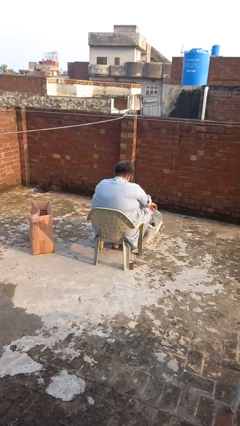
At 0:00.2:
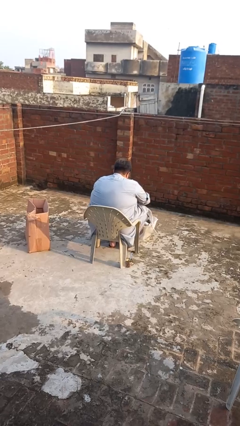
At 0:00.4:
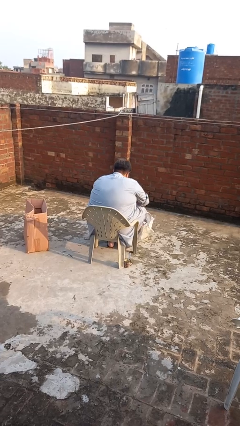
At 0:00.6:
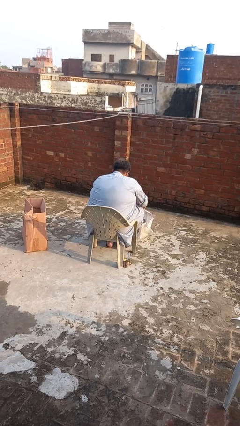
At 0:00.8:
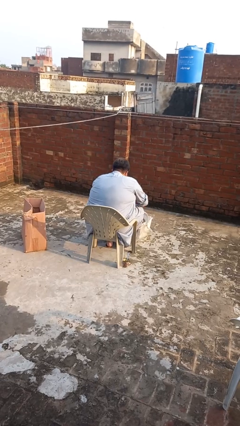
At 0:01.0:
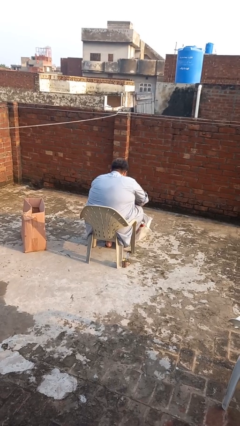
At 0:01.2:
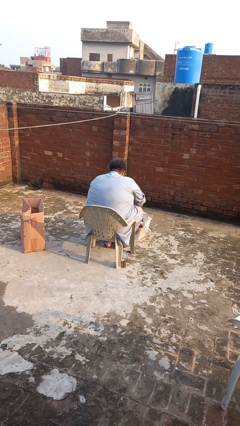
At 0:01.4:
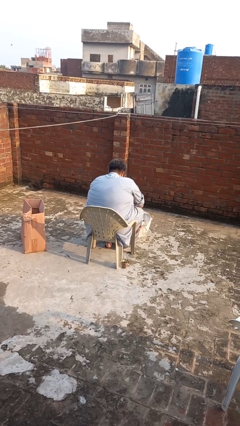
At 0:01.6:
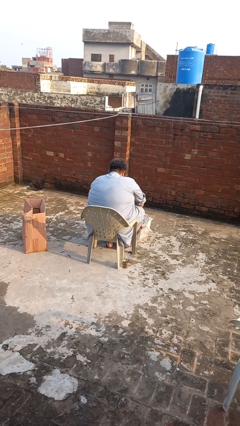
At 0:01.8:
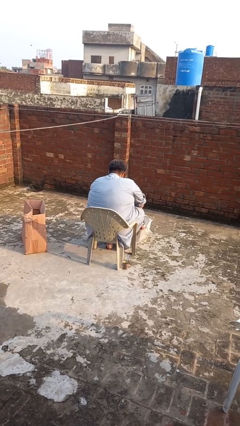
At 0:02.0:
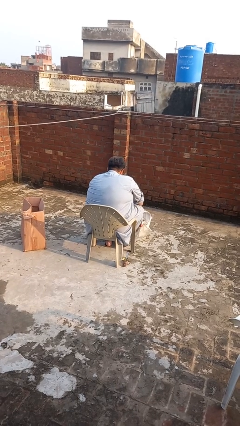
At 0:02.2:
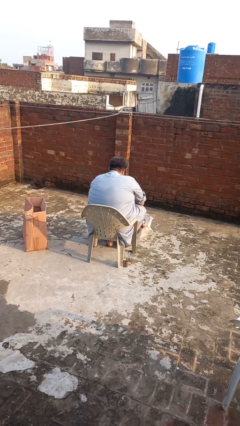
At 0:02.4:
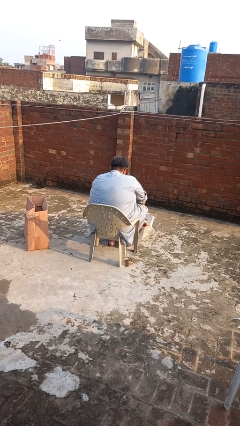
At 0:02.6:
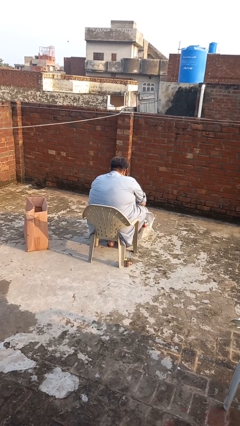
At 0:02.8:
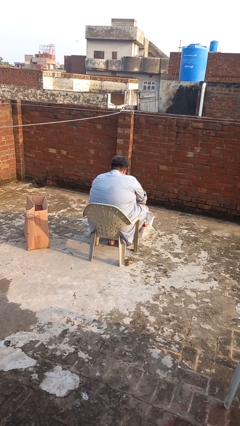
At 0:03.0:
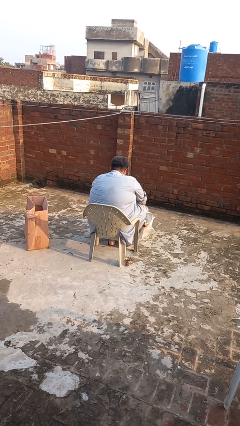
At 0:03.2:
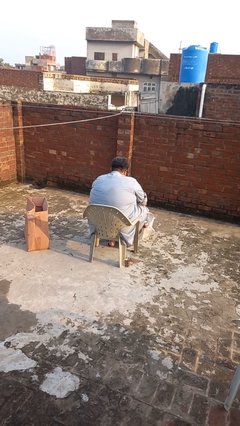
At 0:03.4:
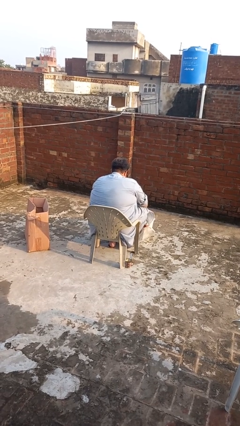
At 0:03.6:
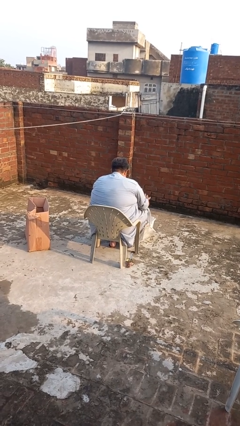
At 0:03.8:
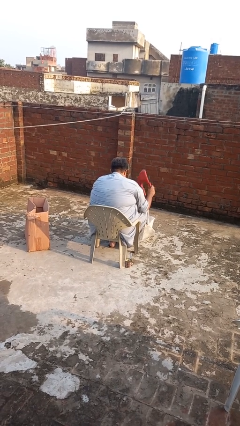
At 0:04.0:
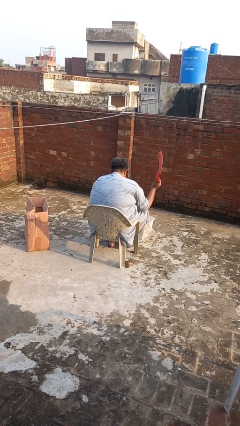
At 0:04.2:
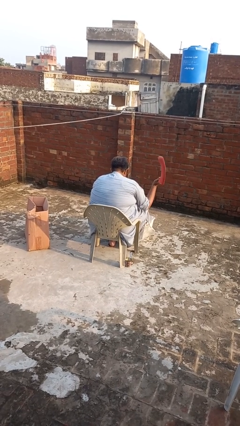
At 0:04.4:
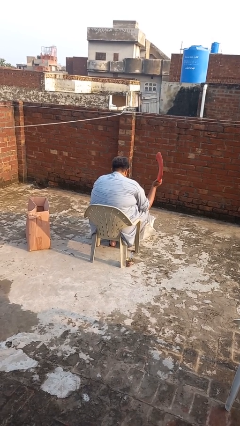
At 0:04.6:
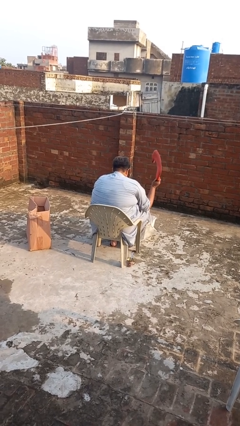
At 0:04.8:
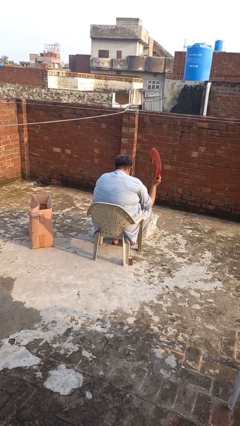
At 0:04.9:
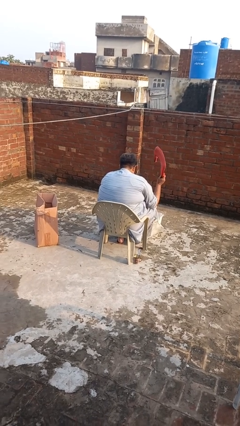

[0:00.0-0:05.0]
person searches in bag

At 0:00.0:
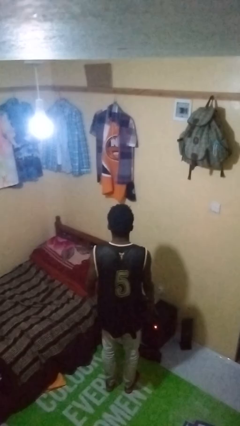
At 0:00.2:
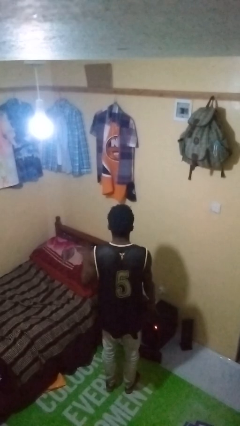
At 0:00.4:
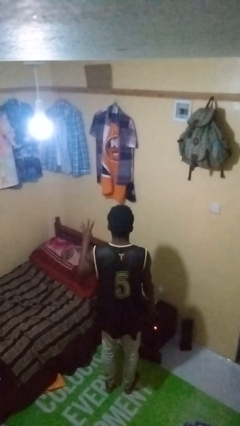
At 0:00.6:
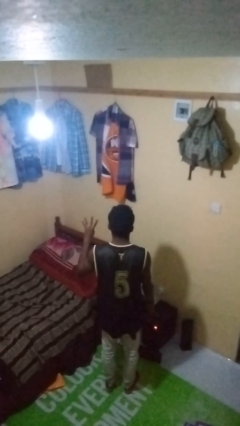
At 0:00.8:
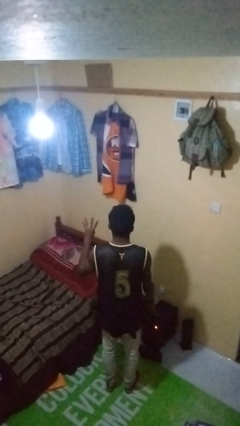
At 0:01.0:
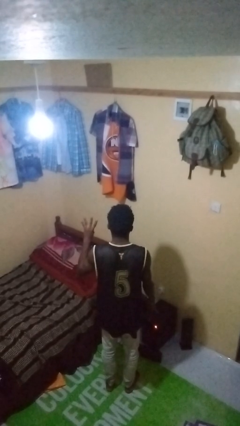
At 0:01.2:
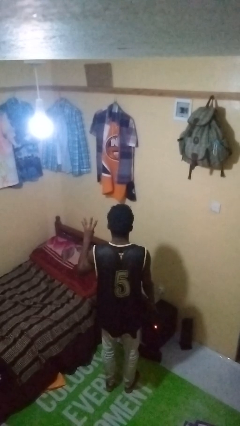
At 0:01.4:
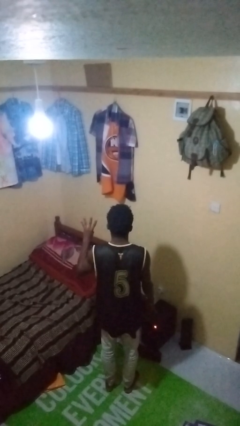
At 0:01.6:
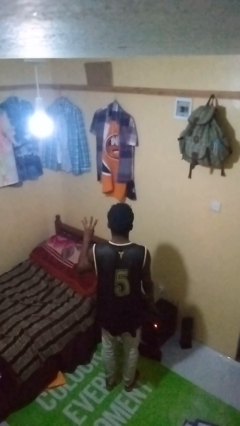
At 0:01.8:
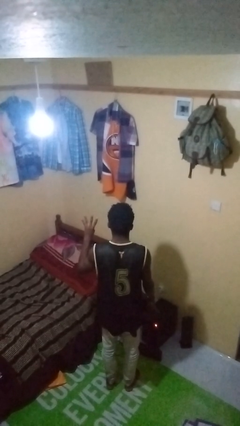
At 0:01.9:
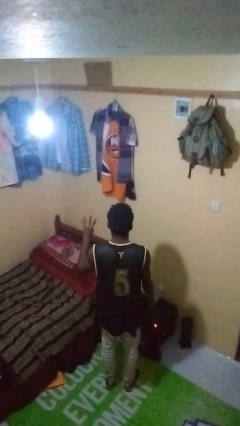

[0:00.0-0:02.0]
person gestures number four

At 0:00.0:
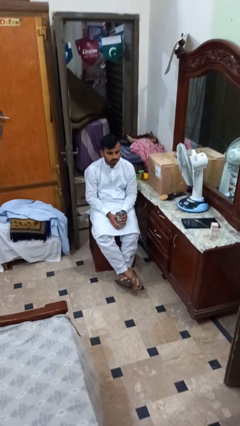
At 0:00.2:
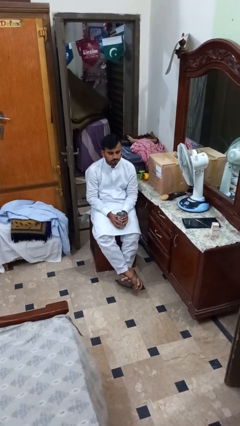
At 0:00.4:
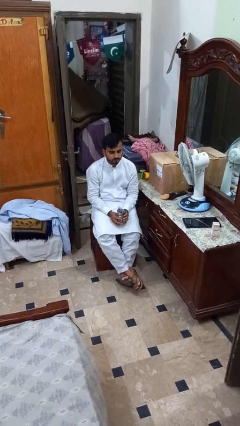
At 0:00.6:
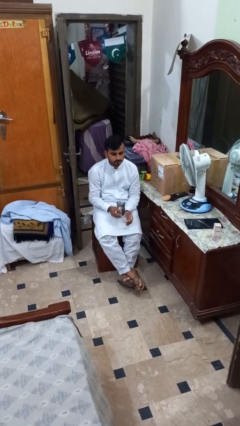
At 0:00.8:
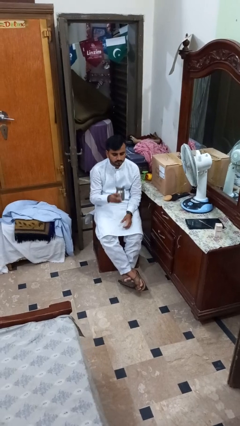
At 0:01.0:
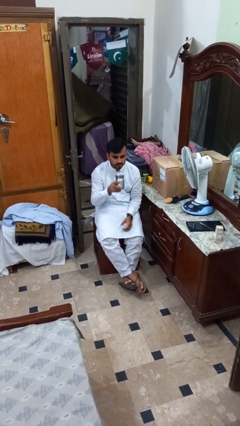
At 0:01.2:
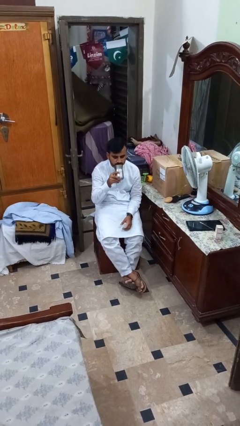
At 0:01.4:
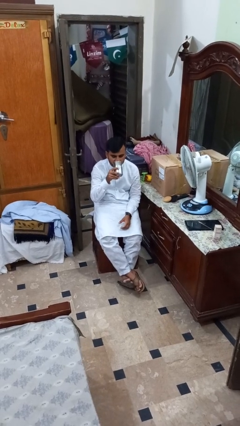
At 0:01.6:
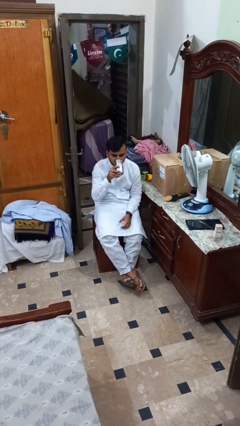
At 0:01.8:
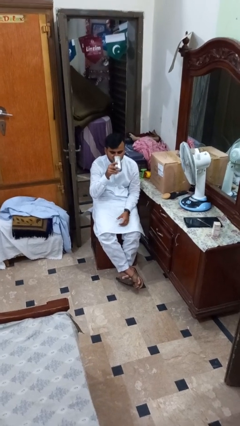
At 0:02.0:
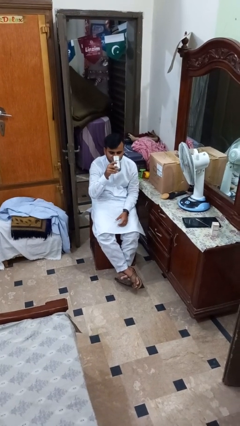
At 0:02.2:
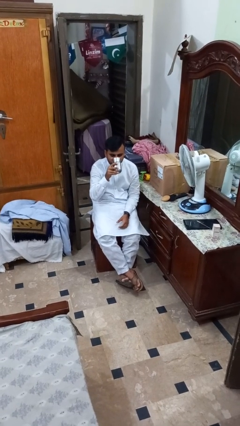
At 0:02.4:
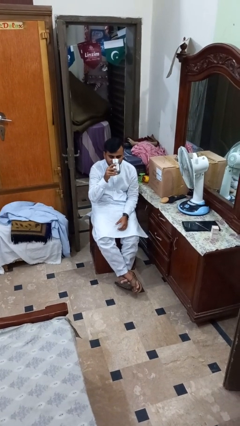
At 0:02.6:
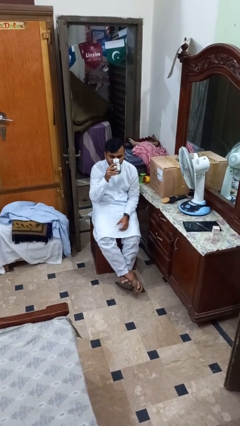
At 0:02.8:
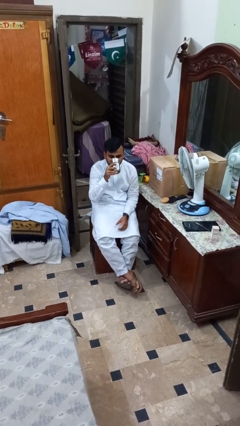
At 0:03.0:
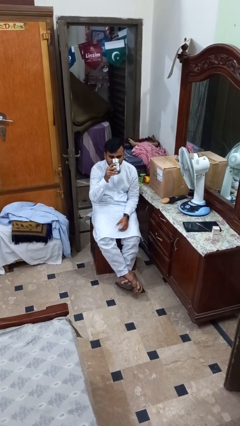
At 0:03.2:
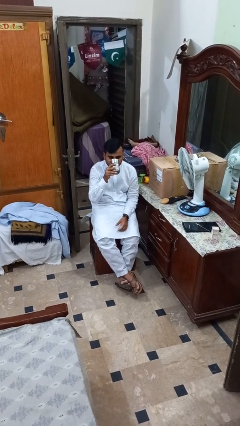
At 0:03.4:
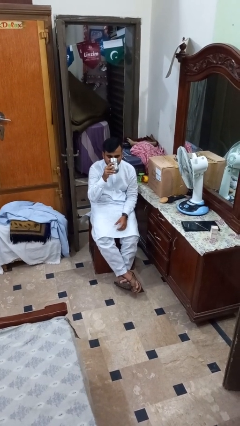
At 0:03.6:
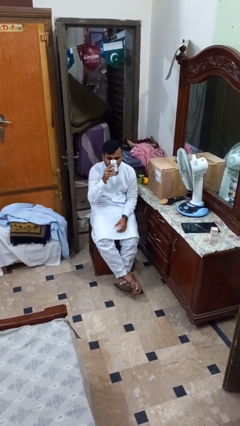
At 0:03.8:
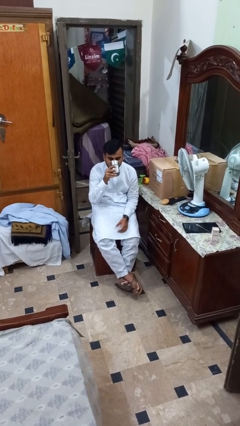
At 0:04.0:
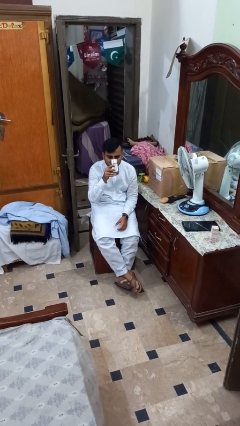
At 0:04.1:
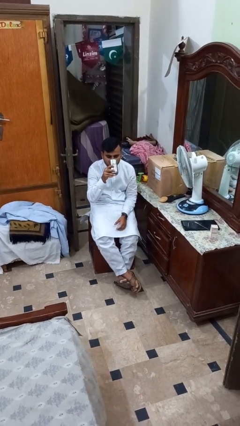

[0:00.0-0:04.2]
person drinks from mug

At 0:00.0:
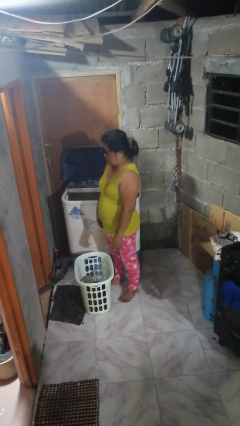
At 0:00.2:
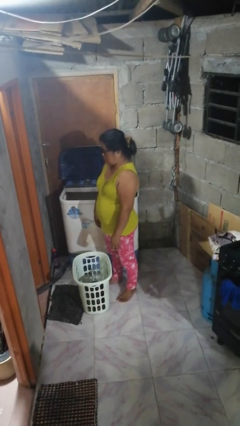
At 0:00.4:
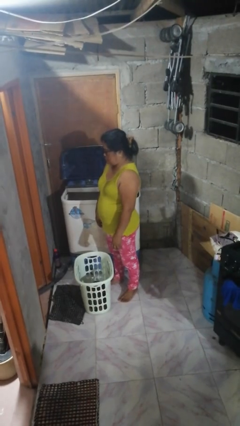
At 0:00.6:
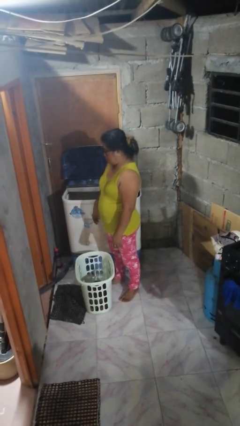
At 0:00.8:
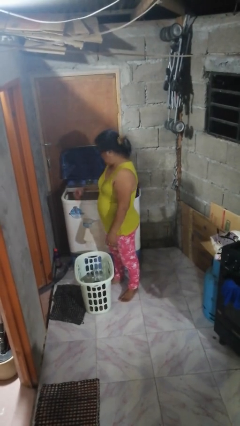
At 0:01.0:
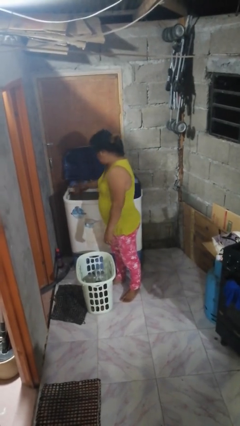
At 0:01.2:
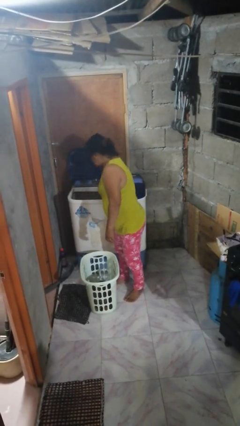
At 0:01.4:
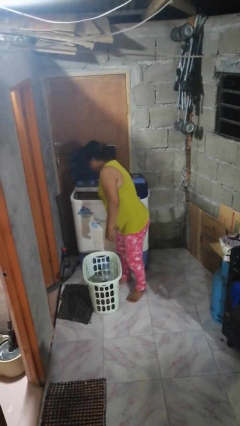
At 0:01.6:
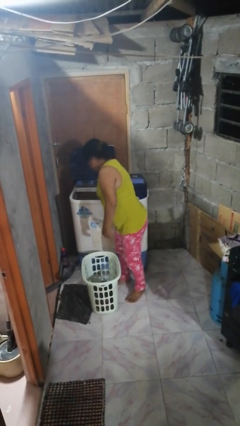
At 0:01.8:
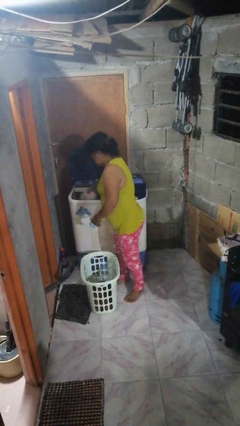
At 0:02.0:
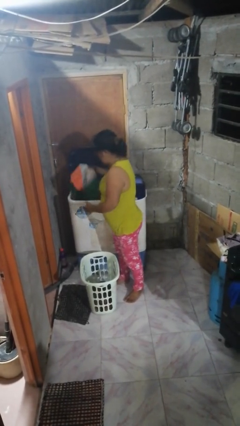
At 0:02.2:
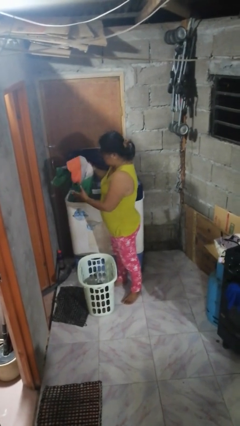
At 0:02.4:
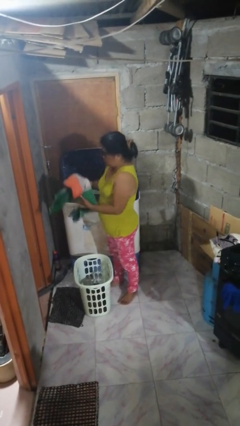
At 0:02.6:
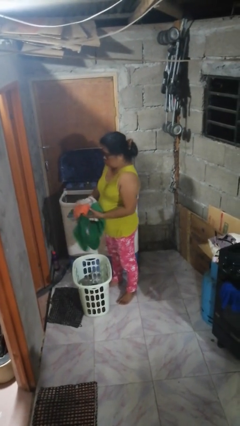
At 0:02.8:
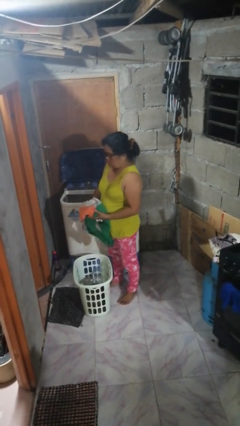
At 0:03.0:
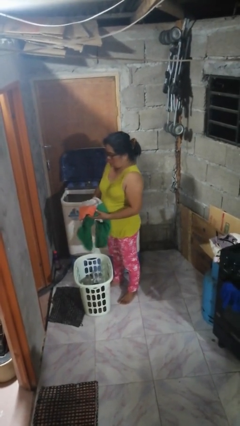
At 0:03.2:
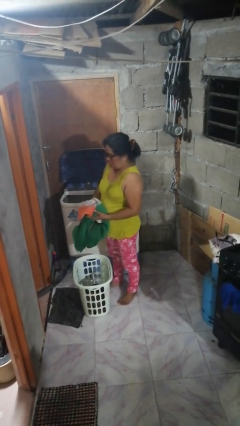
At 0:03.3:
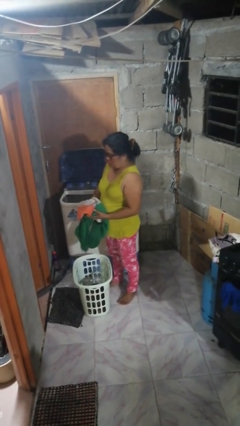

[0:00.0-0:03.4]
person unloads clotheswasher

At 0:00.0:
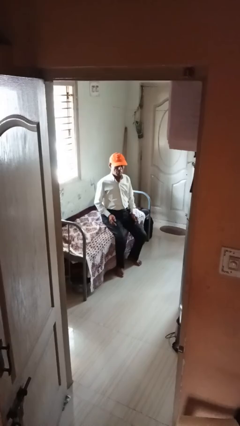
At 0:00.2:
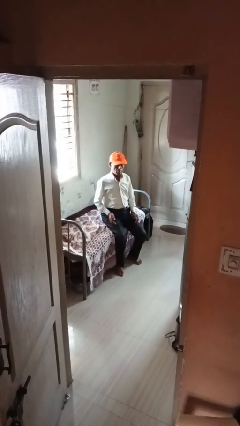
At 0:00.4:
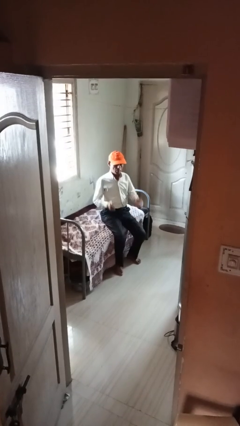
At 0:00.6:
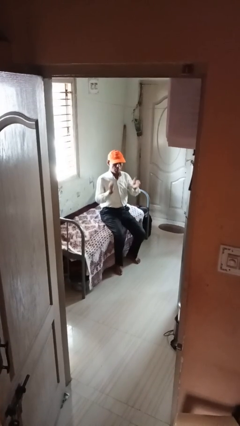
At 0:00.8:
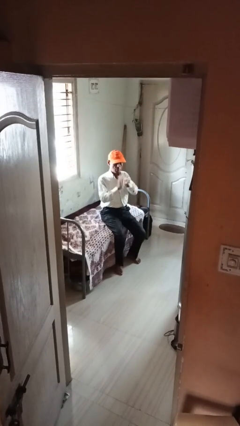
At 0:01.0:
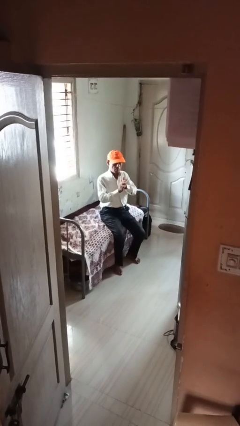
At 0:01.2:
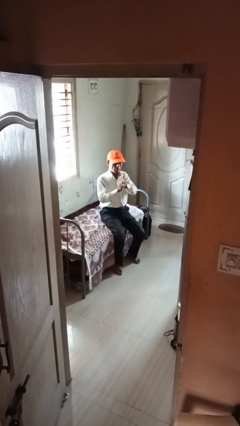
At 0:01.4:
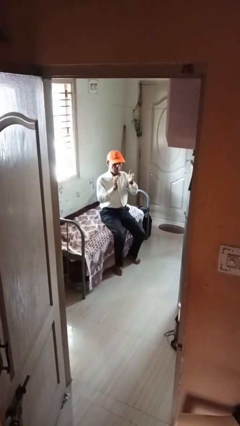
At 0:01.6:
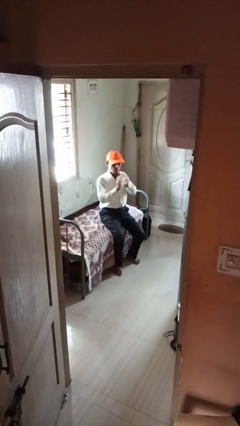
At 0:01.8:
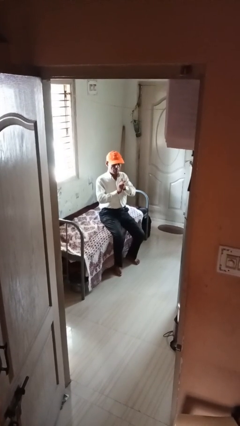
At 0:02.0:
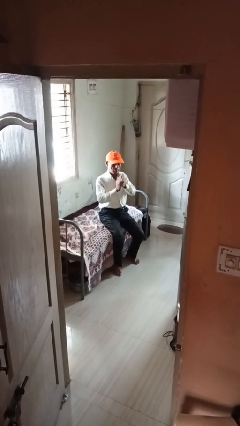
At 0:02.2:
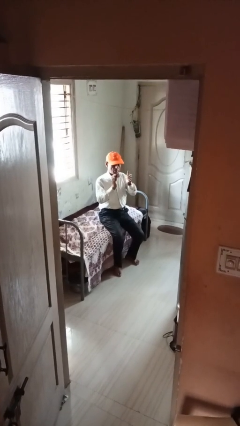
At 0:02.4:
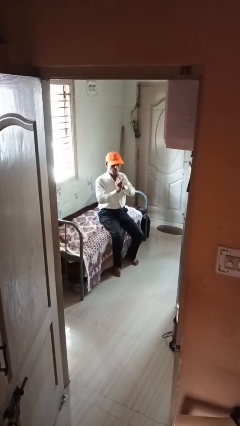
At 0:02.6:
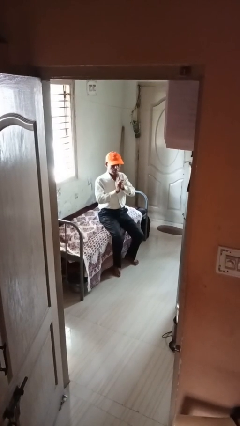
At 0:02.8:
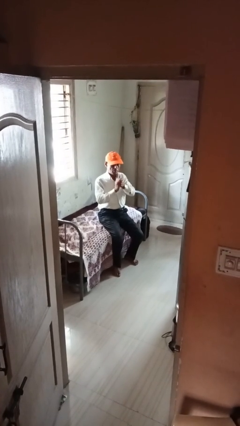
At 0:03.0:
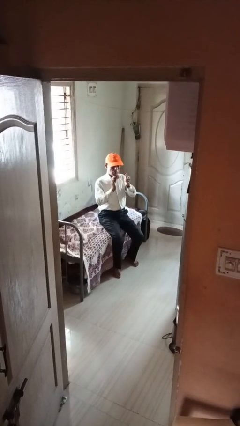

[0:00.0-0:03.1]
person claps hands
